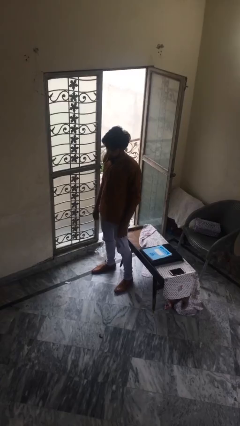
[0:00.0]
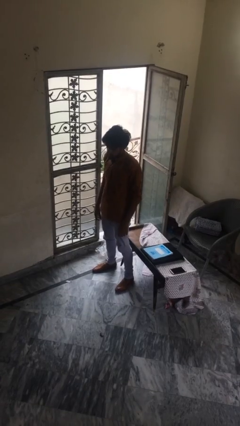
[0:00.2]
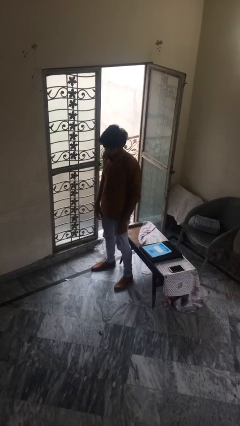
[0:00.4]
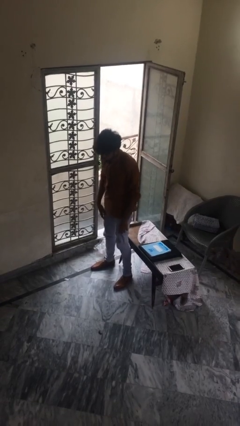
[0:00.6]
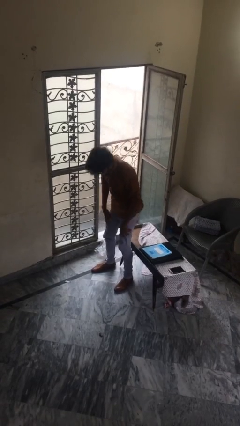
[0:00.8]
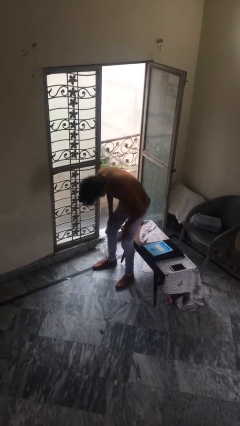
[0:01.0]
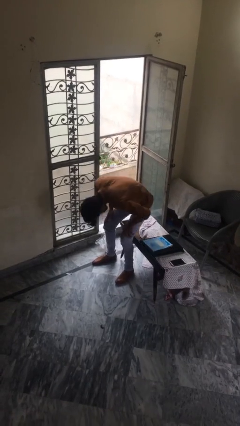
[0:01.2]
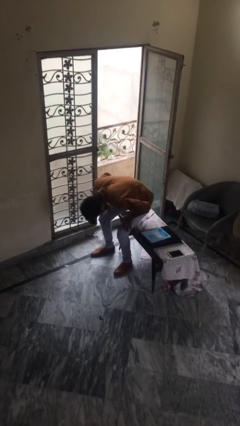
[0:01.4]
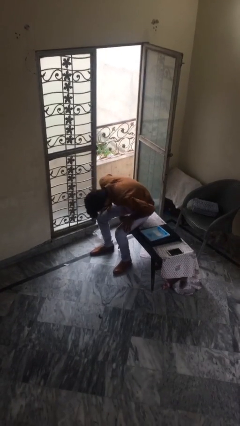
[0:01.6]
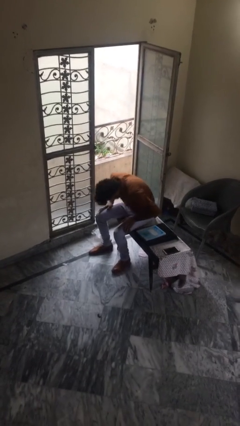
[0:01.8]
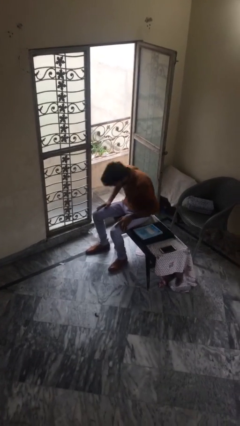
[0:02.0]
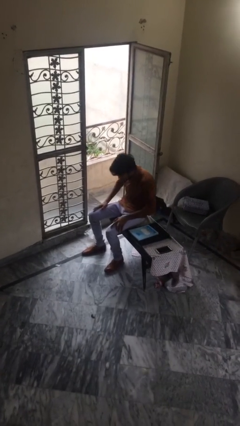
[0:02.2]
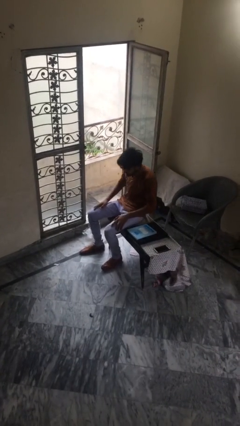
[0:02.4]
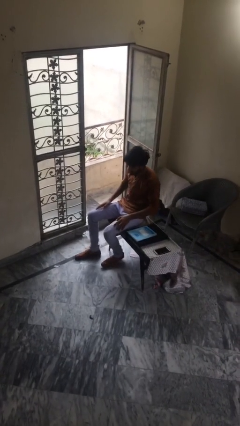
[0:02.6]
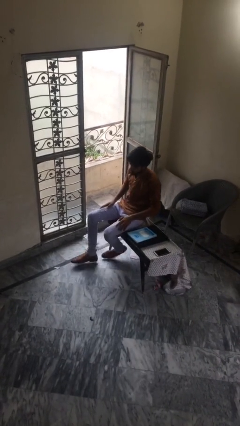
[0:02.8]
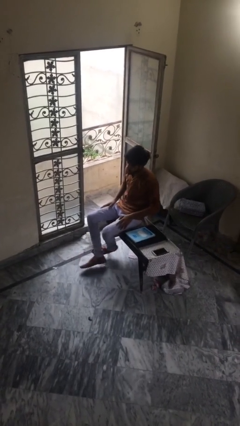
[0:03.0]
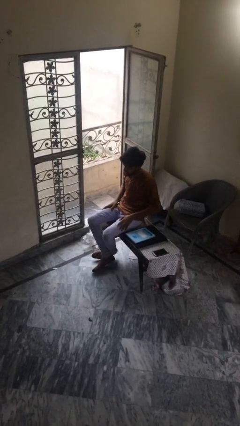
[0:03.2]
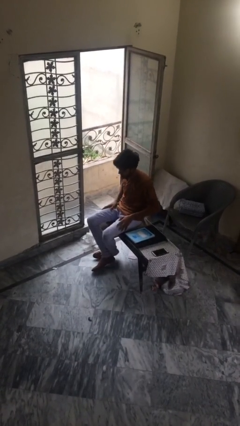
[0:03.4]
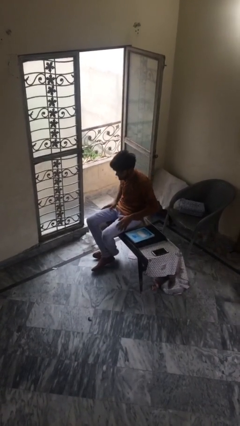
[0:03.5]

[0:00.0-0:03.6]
person sits down

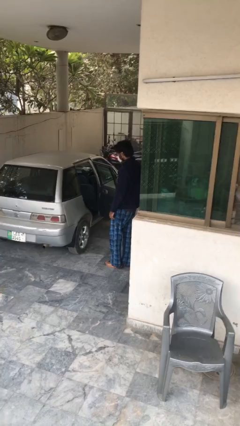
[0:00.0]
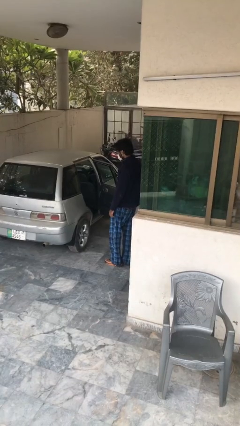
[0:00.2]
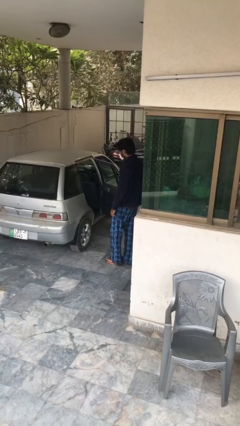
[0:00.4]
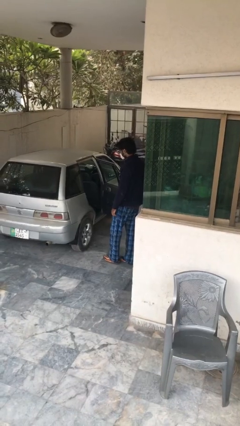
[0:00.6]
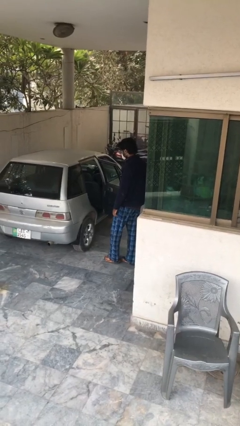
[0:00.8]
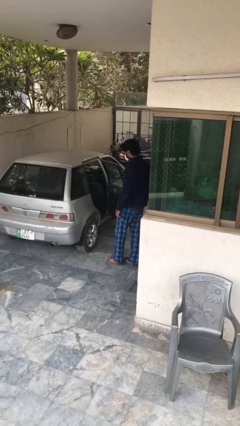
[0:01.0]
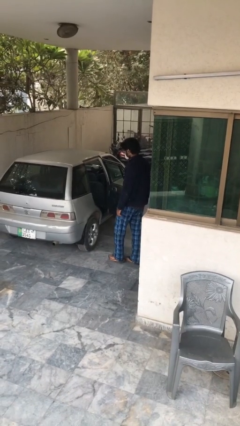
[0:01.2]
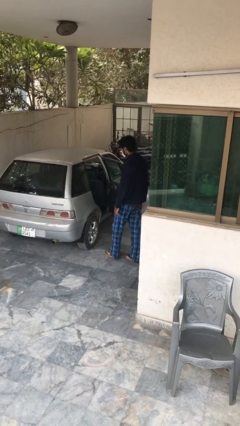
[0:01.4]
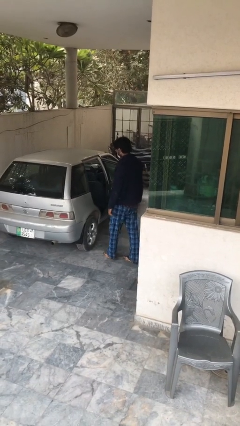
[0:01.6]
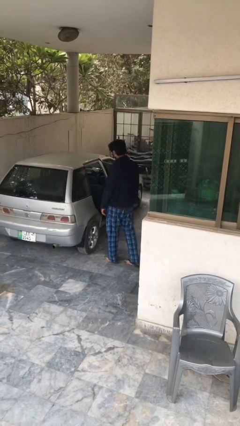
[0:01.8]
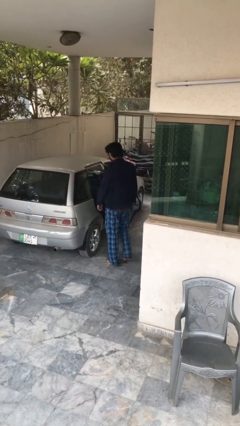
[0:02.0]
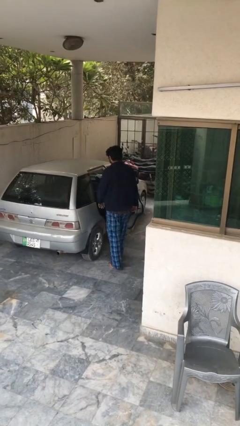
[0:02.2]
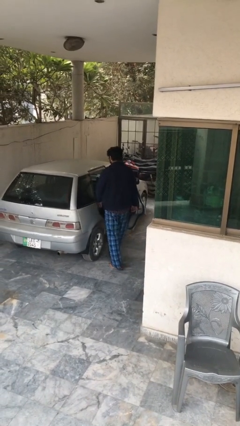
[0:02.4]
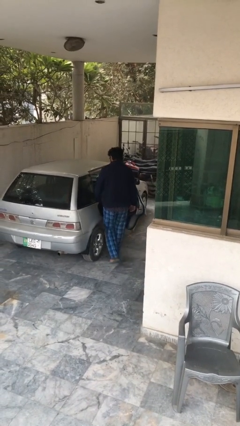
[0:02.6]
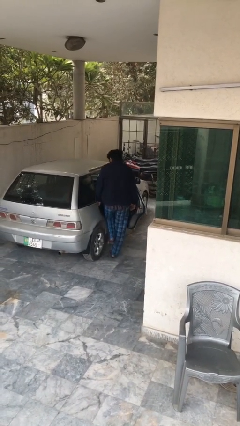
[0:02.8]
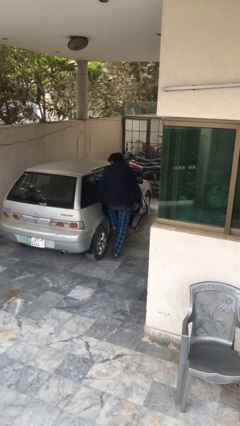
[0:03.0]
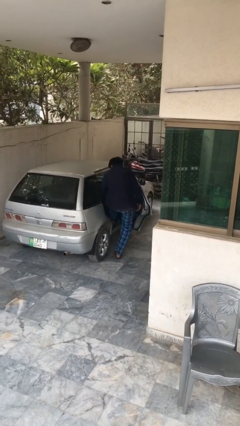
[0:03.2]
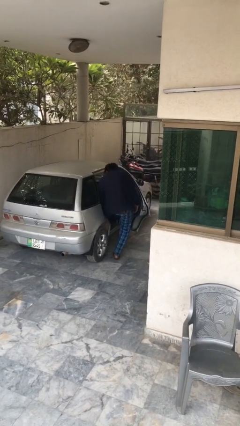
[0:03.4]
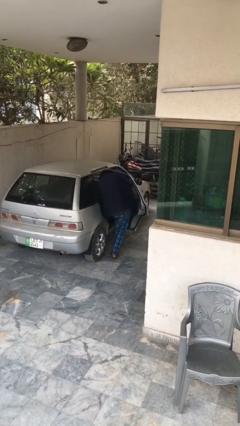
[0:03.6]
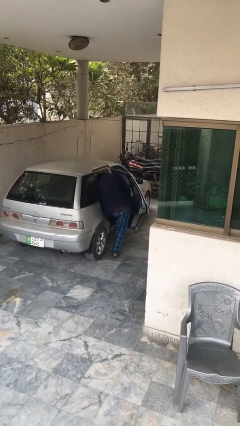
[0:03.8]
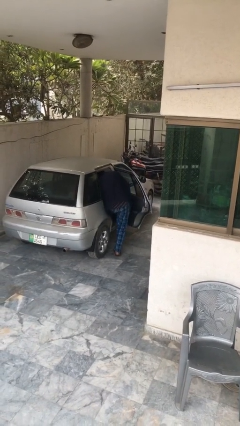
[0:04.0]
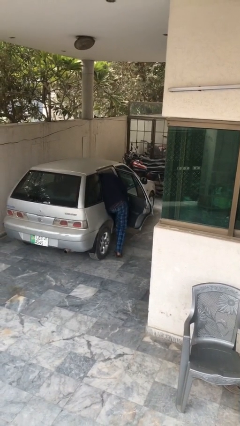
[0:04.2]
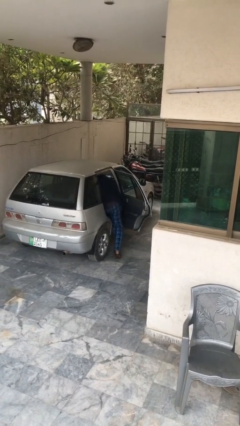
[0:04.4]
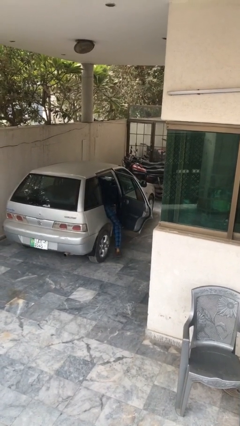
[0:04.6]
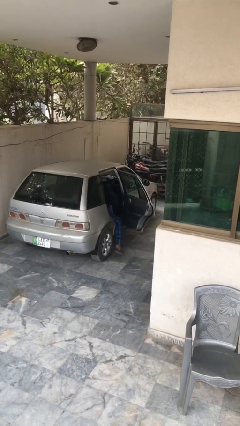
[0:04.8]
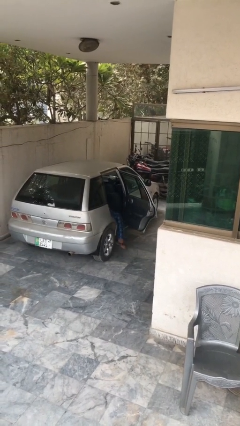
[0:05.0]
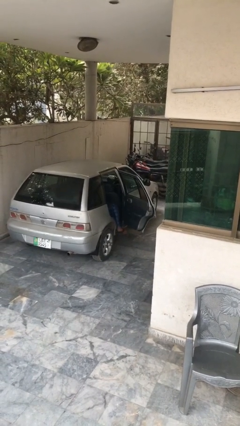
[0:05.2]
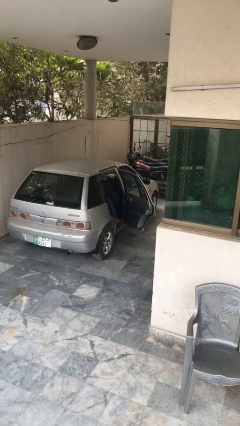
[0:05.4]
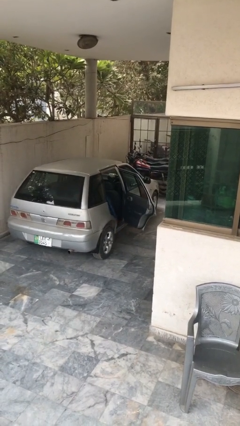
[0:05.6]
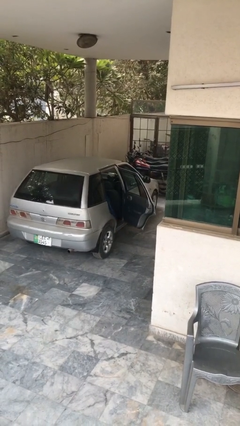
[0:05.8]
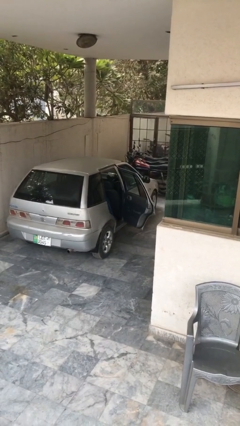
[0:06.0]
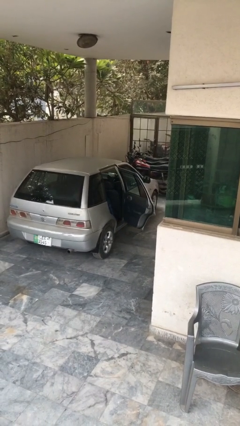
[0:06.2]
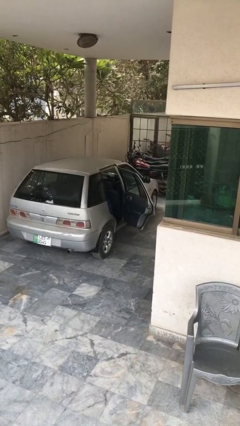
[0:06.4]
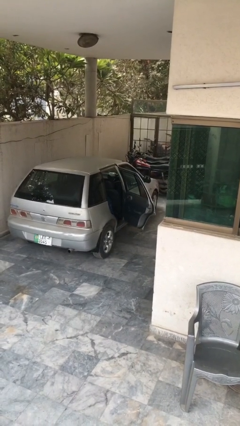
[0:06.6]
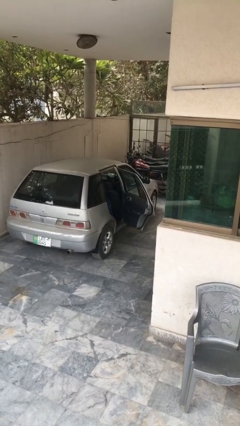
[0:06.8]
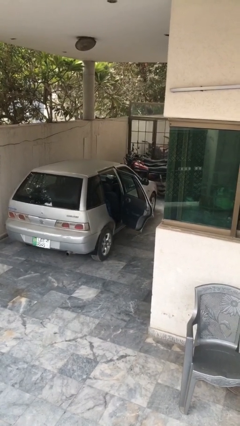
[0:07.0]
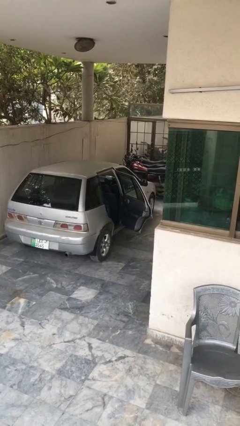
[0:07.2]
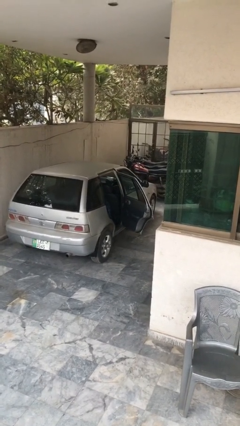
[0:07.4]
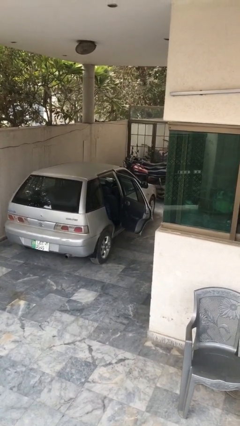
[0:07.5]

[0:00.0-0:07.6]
person enters car

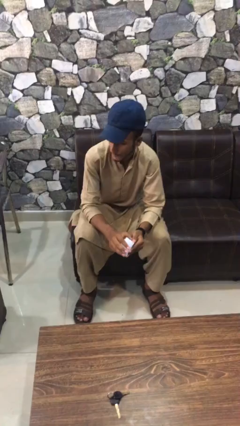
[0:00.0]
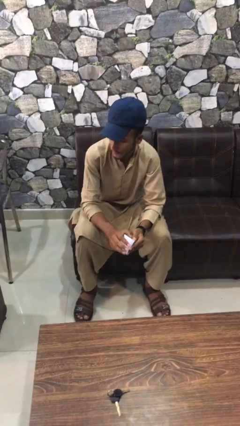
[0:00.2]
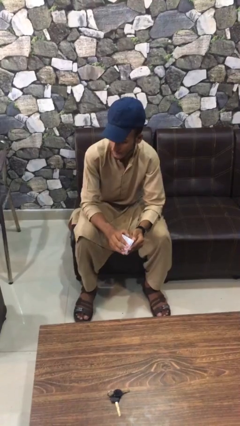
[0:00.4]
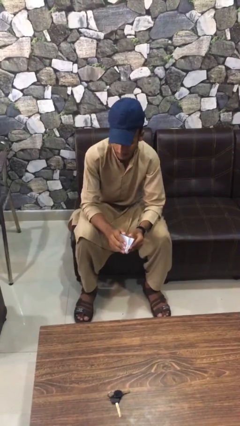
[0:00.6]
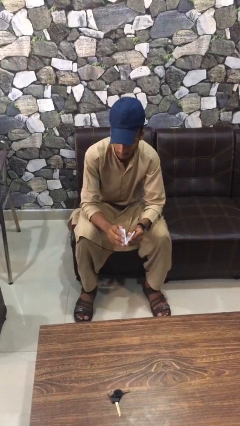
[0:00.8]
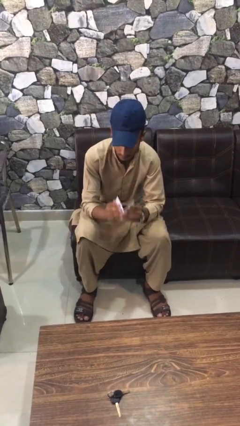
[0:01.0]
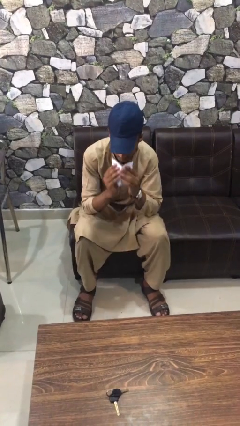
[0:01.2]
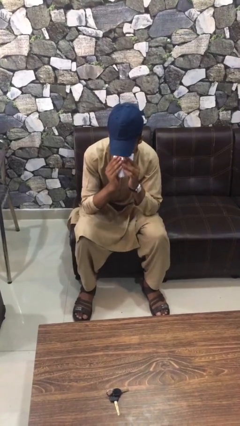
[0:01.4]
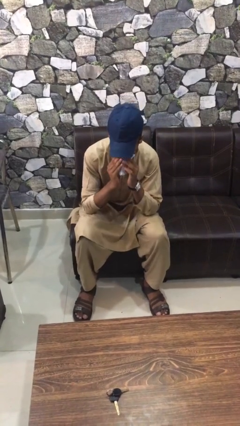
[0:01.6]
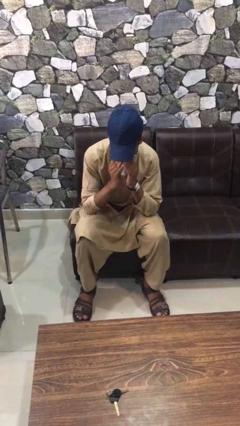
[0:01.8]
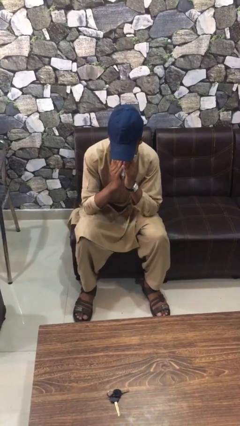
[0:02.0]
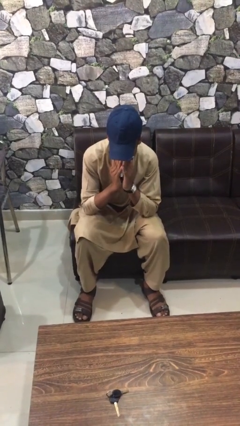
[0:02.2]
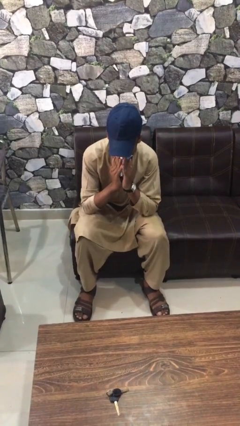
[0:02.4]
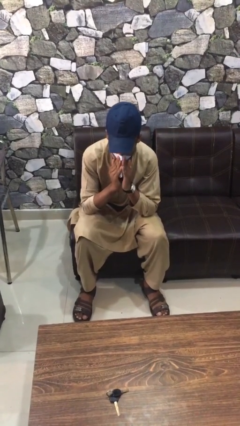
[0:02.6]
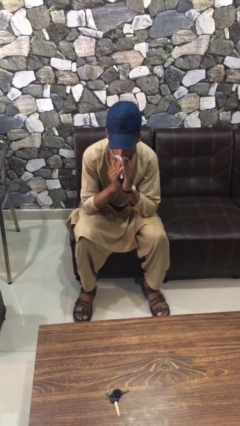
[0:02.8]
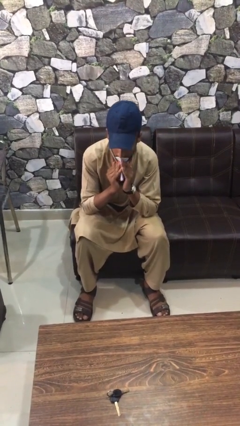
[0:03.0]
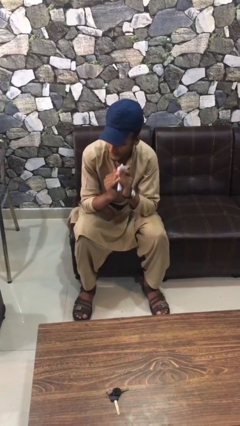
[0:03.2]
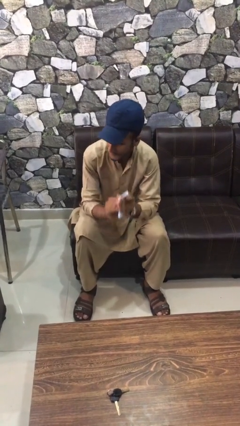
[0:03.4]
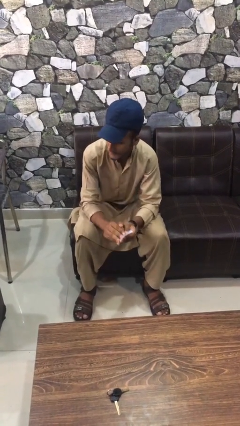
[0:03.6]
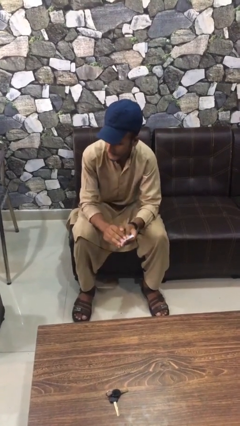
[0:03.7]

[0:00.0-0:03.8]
person blows nose

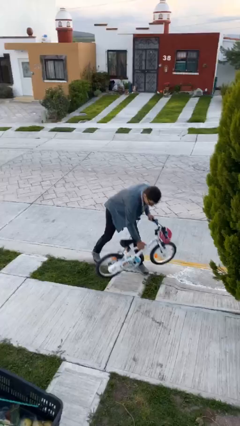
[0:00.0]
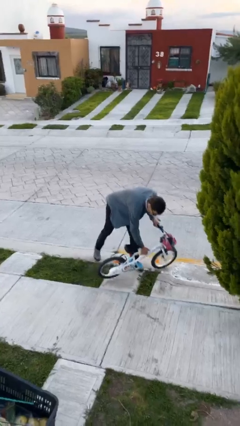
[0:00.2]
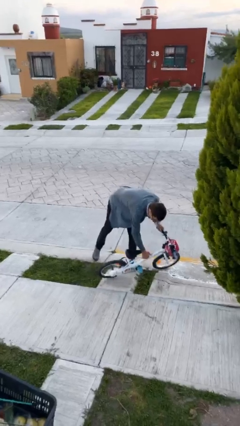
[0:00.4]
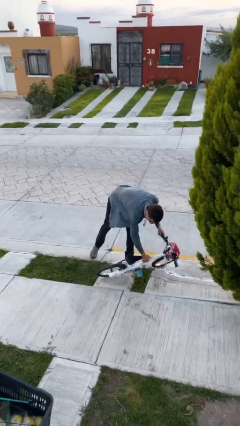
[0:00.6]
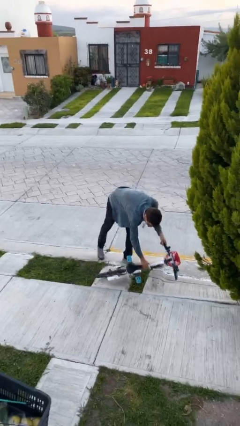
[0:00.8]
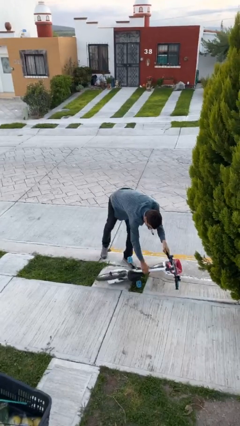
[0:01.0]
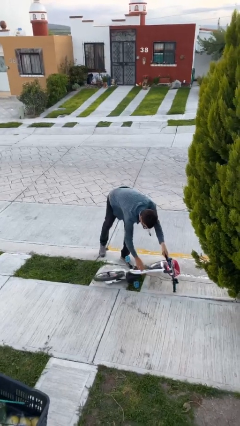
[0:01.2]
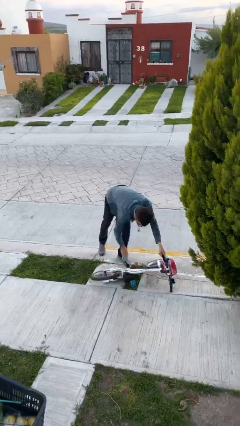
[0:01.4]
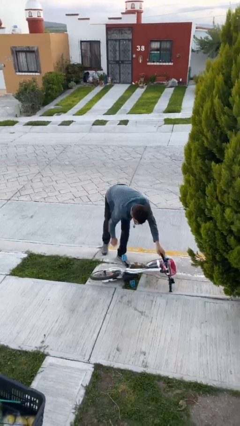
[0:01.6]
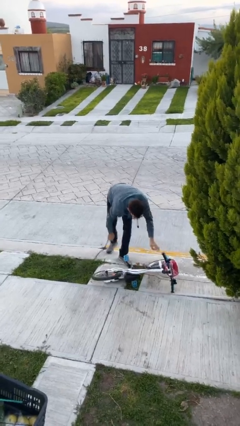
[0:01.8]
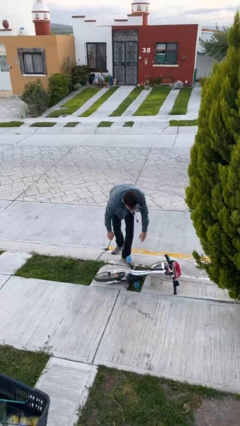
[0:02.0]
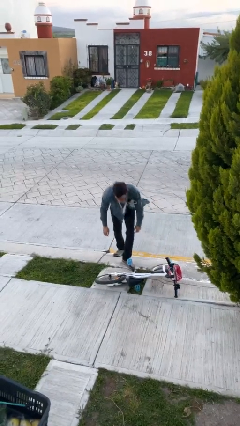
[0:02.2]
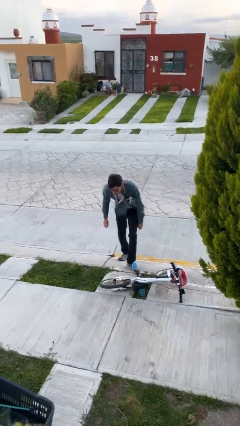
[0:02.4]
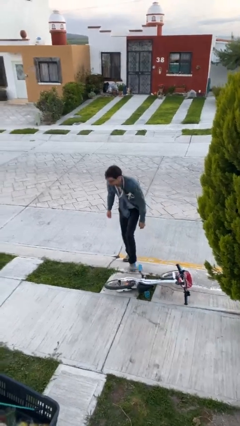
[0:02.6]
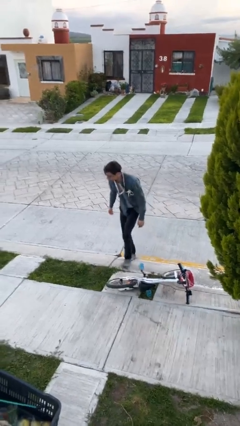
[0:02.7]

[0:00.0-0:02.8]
person puts down object on floor
